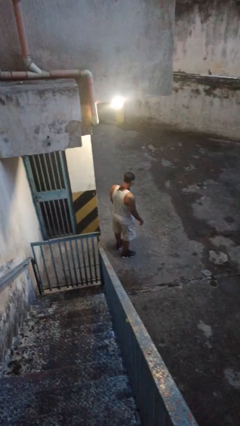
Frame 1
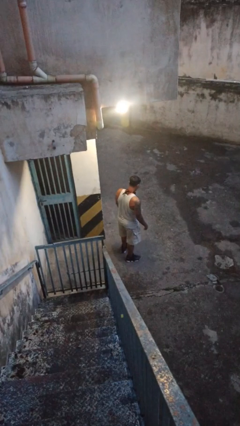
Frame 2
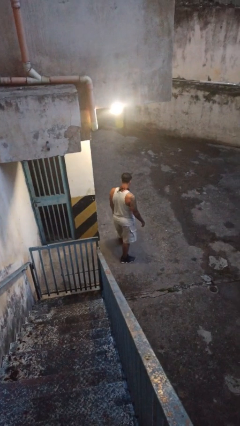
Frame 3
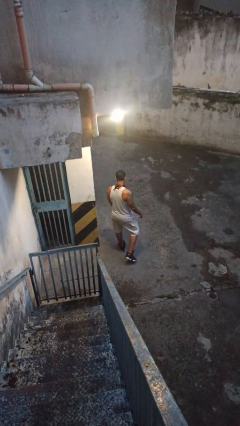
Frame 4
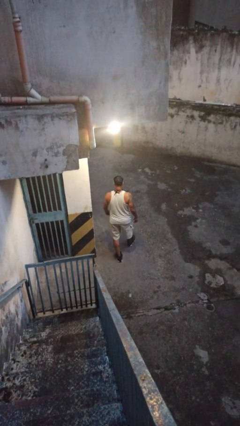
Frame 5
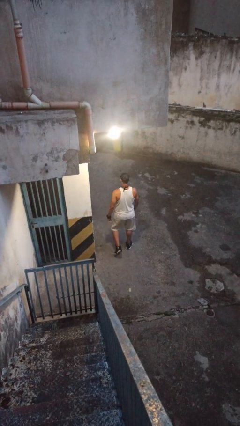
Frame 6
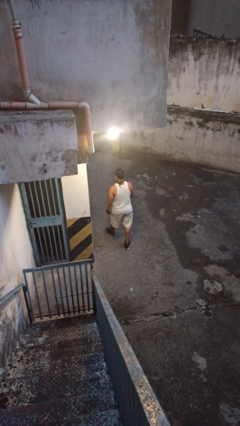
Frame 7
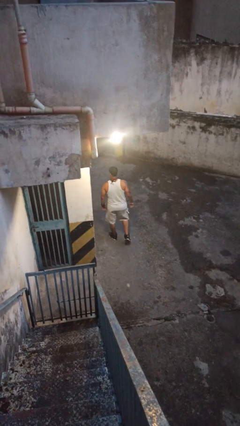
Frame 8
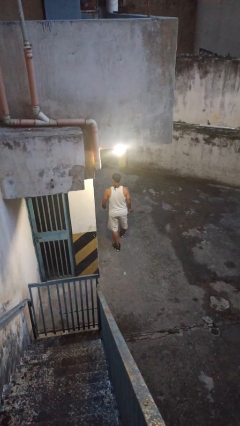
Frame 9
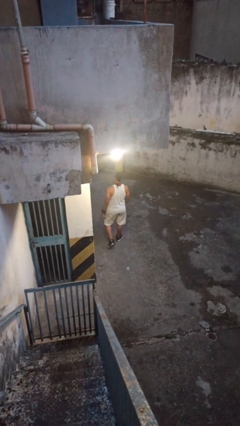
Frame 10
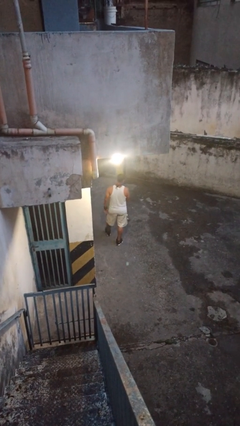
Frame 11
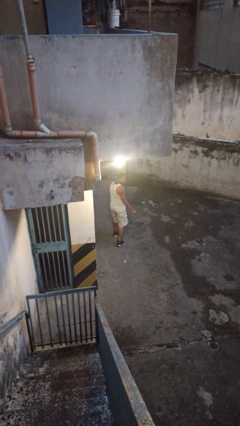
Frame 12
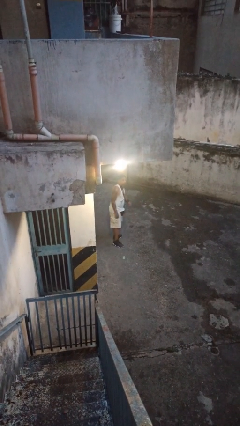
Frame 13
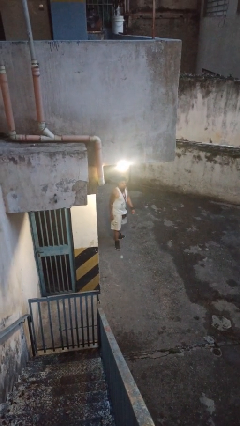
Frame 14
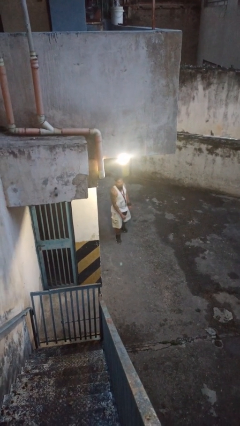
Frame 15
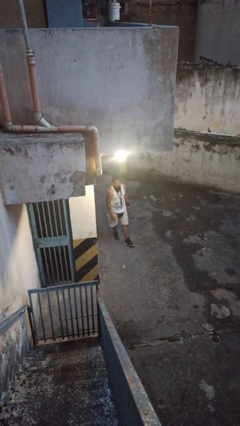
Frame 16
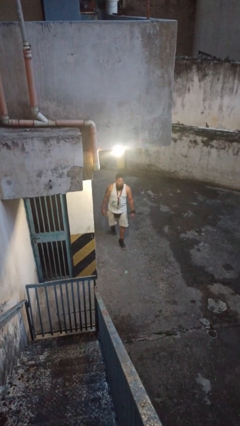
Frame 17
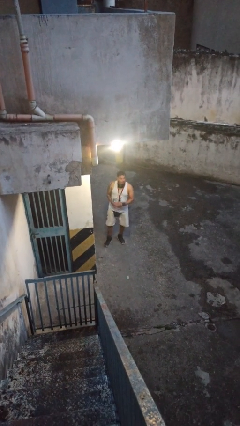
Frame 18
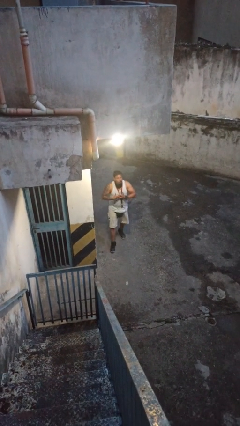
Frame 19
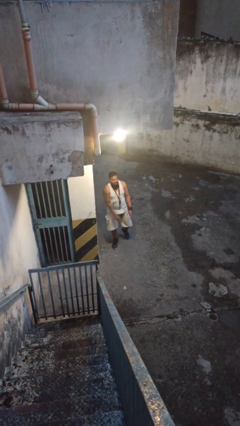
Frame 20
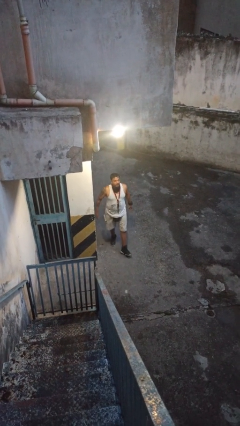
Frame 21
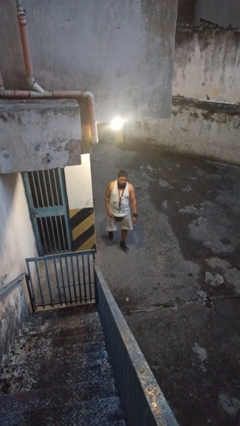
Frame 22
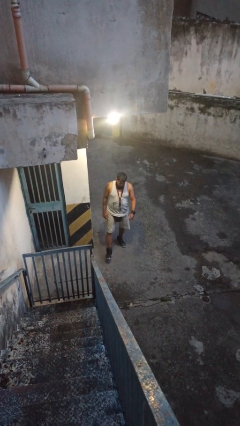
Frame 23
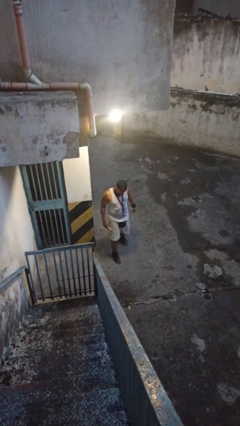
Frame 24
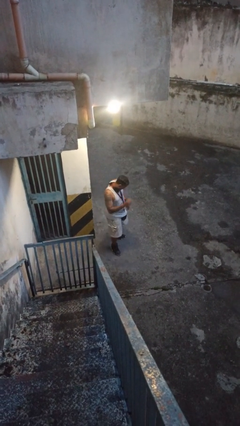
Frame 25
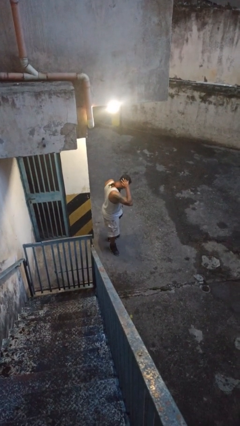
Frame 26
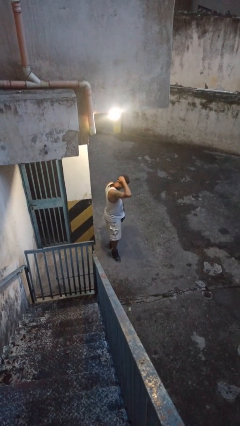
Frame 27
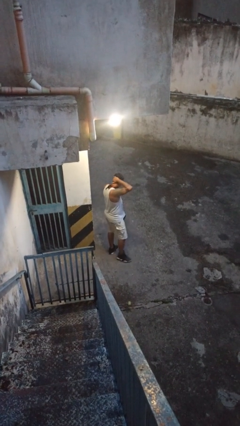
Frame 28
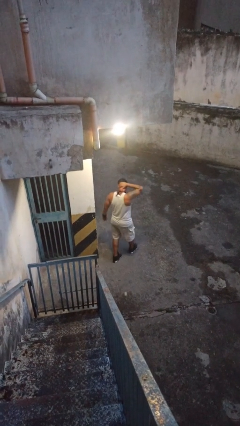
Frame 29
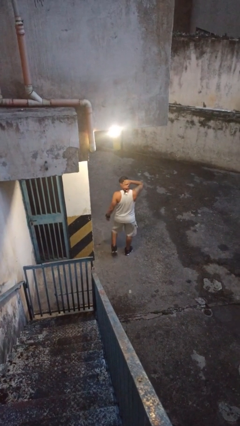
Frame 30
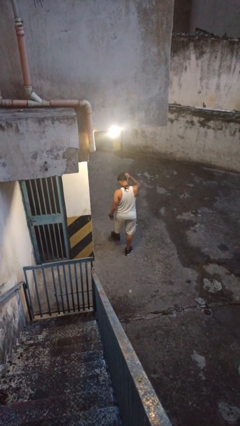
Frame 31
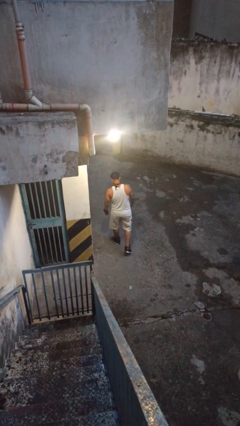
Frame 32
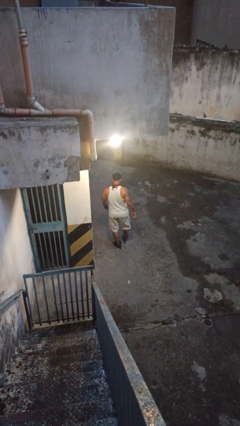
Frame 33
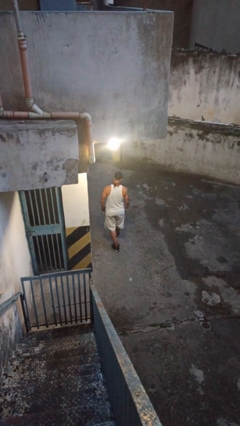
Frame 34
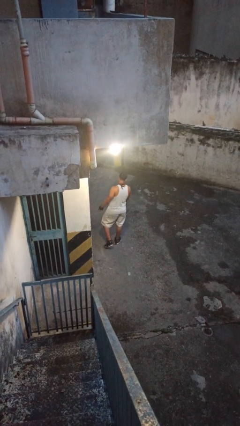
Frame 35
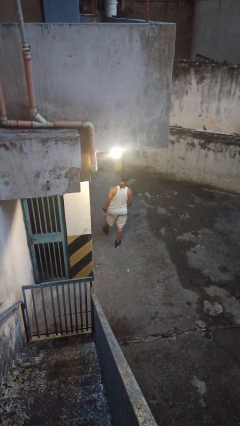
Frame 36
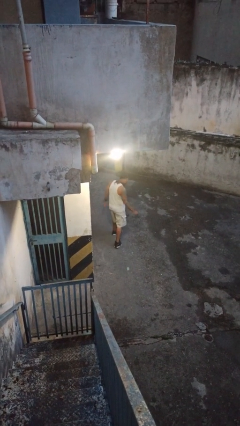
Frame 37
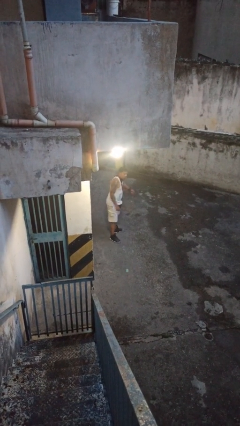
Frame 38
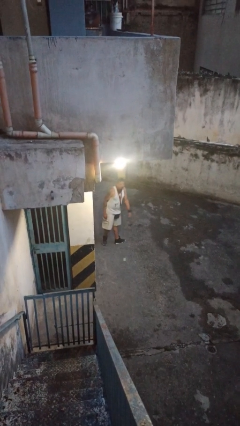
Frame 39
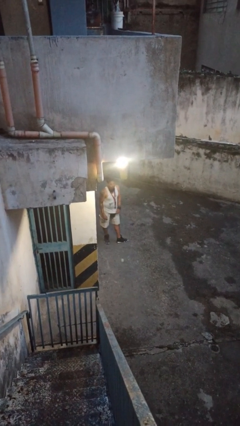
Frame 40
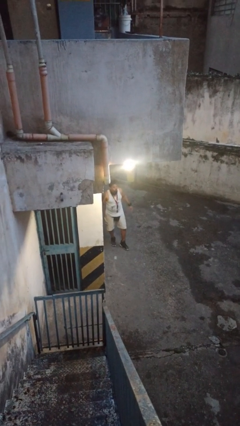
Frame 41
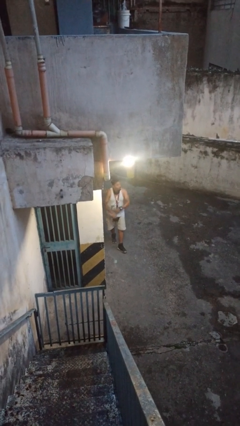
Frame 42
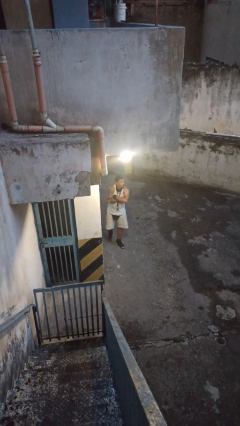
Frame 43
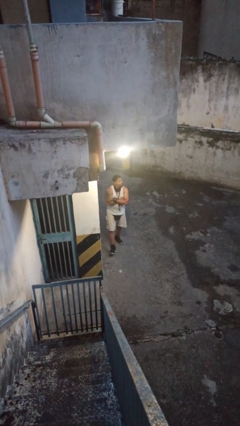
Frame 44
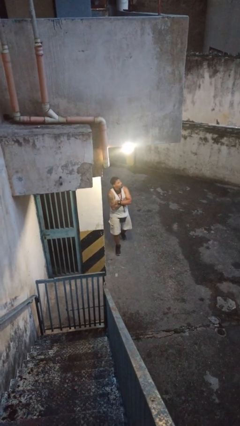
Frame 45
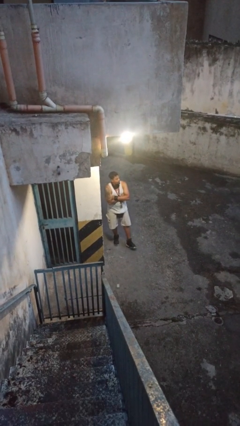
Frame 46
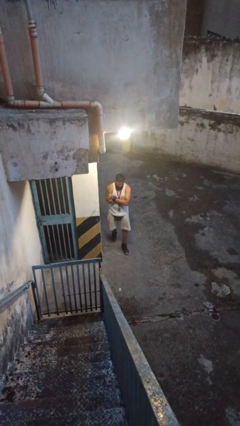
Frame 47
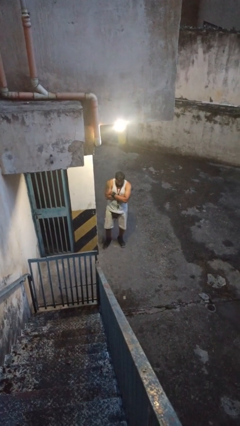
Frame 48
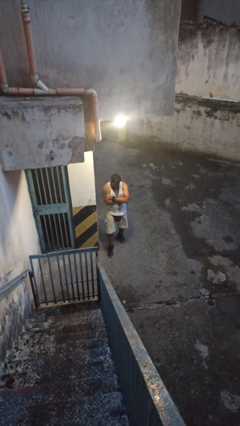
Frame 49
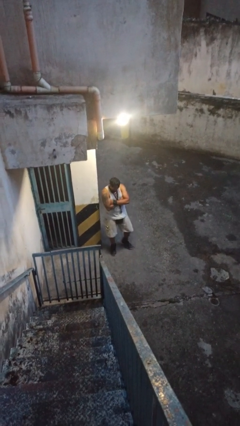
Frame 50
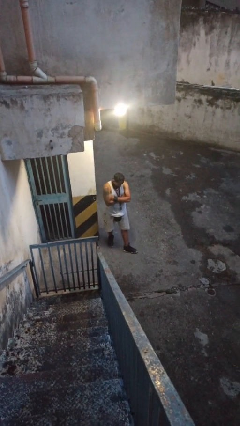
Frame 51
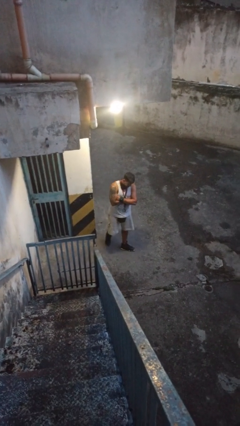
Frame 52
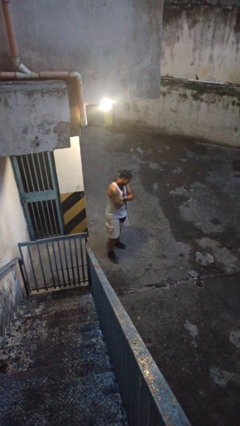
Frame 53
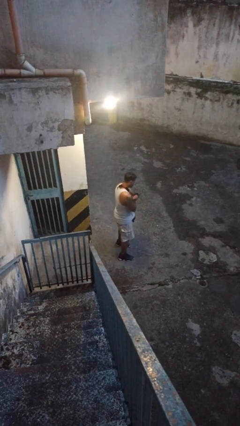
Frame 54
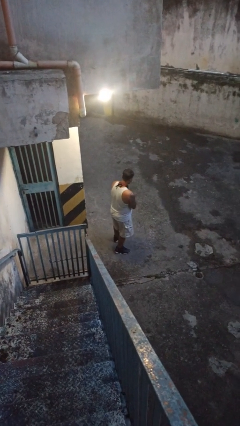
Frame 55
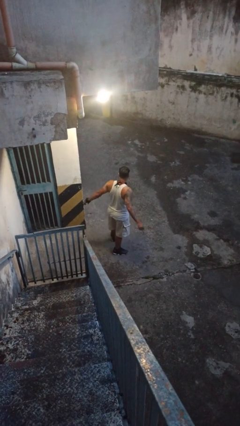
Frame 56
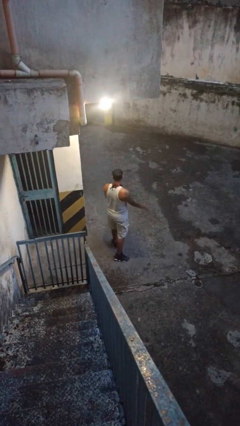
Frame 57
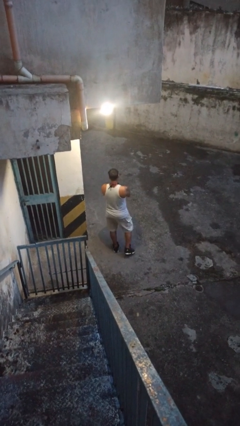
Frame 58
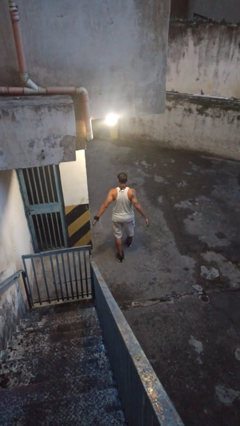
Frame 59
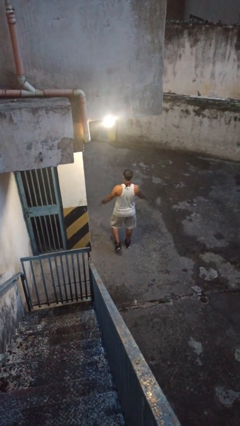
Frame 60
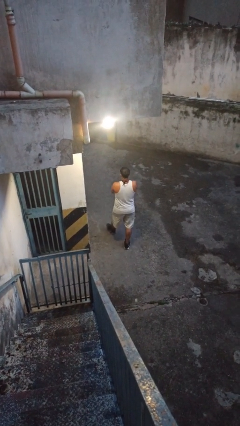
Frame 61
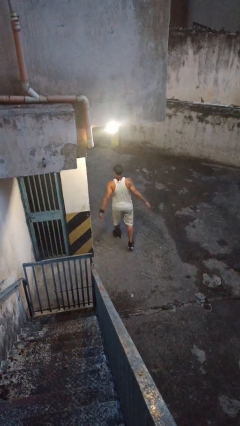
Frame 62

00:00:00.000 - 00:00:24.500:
person walks

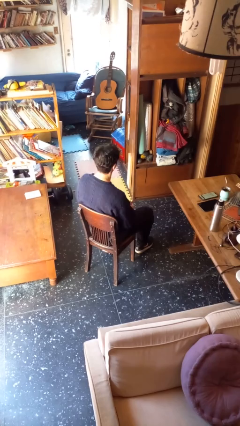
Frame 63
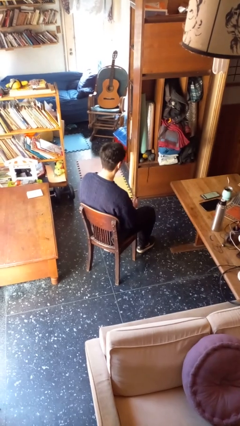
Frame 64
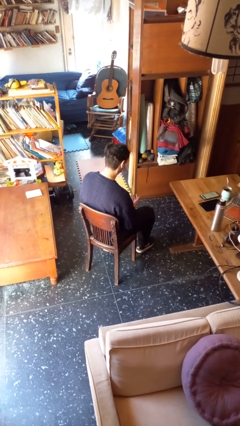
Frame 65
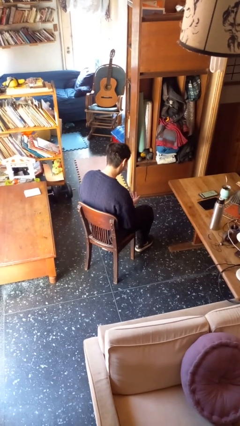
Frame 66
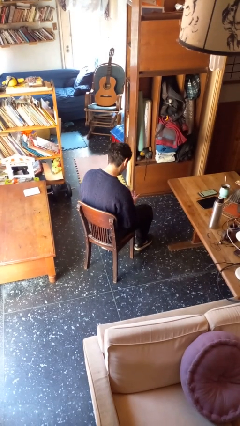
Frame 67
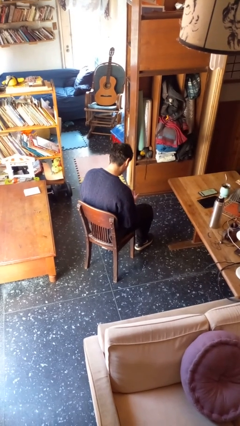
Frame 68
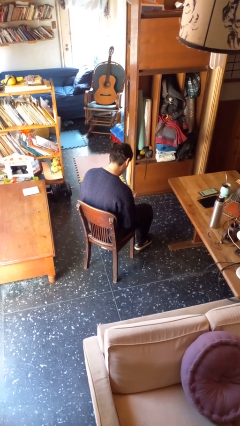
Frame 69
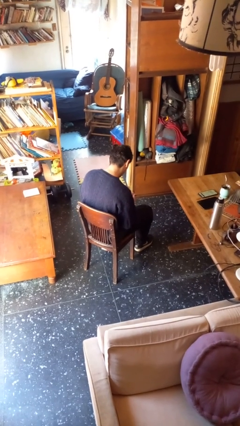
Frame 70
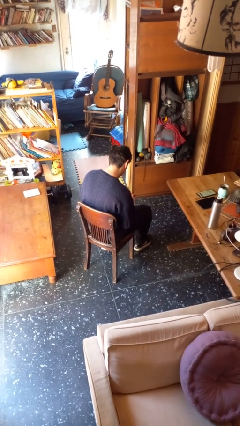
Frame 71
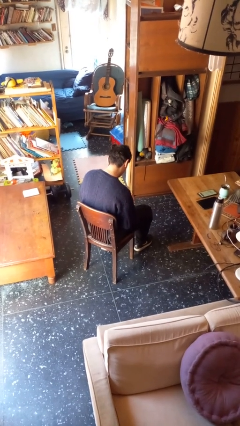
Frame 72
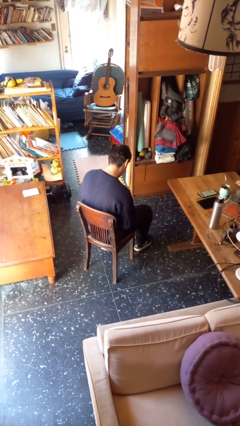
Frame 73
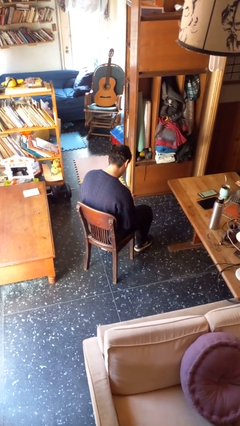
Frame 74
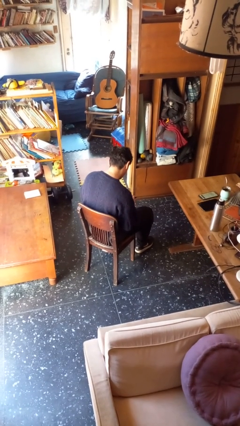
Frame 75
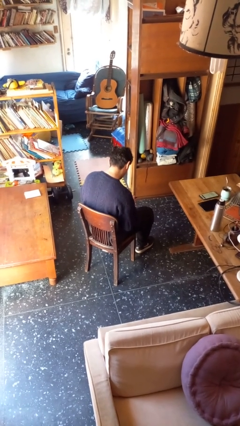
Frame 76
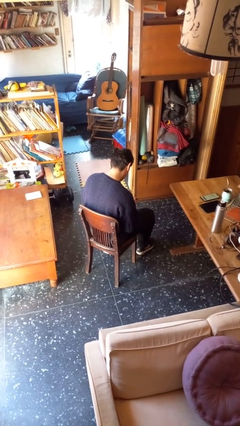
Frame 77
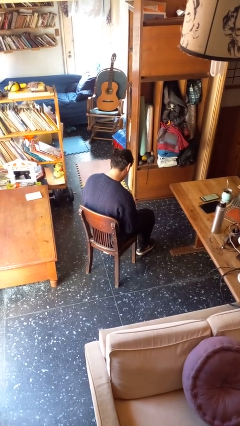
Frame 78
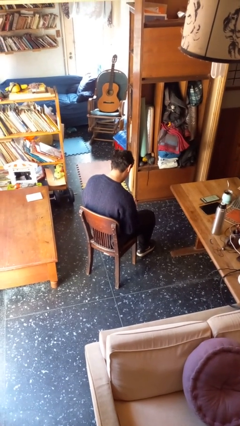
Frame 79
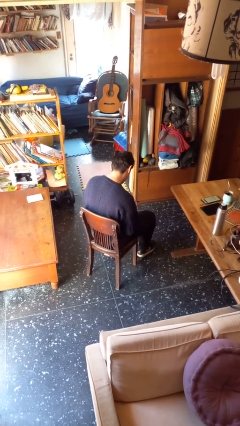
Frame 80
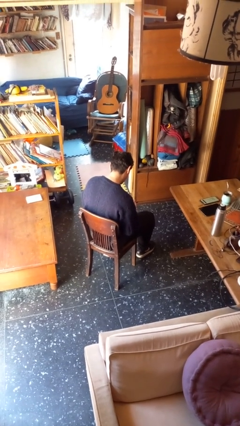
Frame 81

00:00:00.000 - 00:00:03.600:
person looks at hands in lap

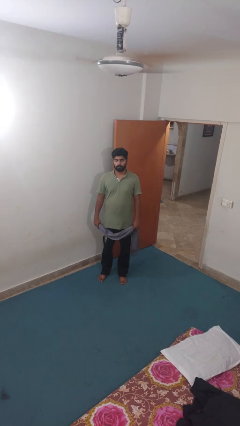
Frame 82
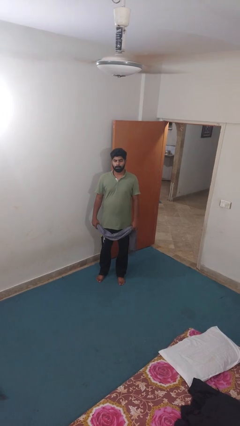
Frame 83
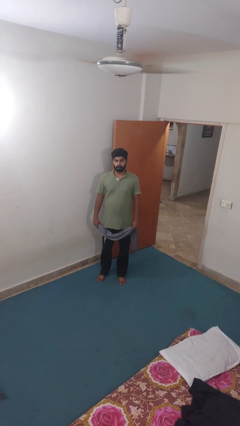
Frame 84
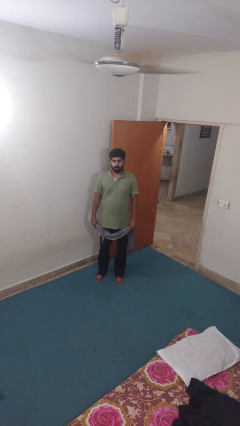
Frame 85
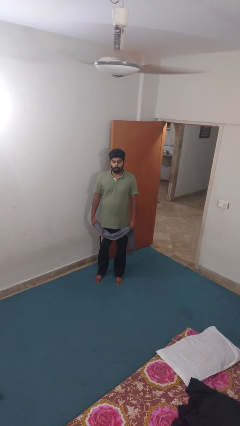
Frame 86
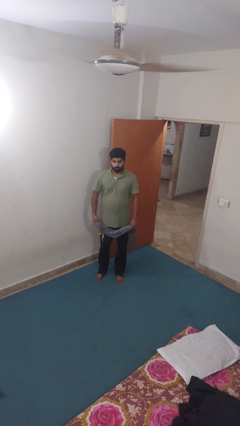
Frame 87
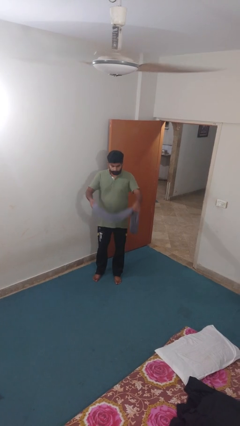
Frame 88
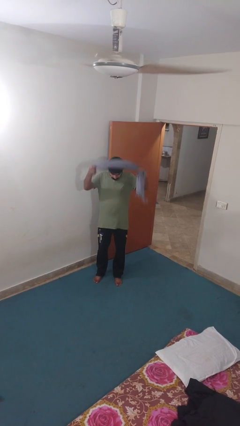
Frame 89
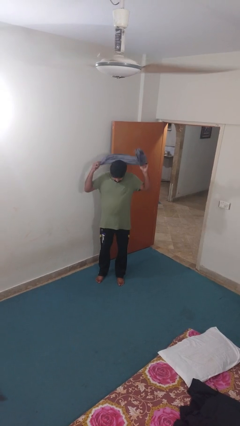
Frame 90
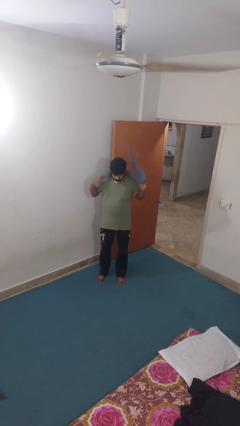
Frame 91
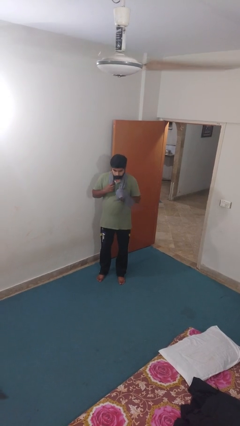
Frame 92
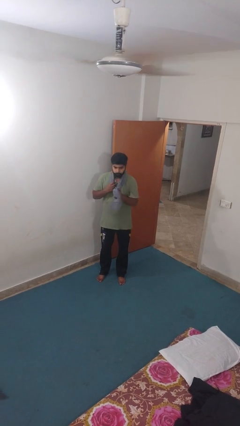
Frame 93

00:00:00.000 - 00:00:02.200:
person puts on scarf

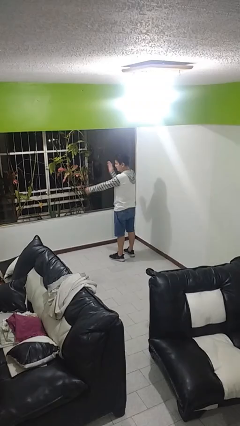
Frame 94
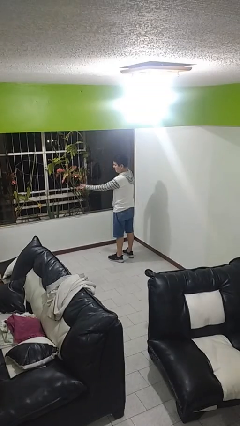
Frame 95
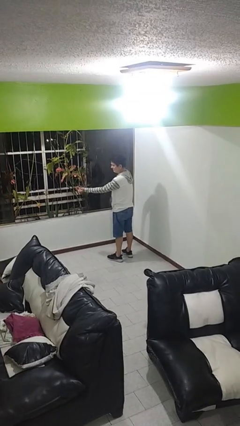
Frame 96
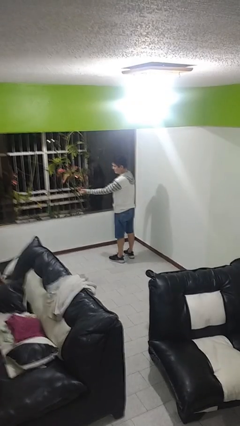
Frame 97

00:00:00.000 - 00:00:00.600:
person swats bug
